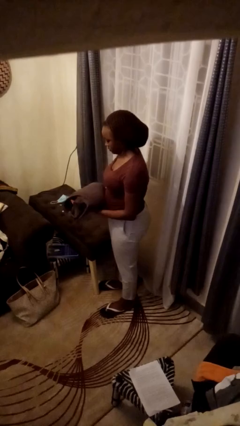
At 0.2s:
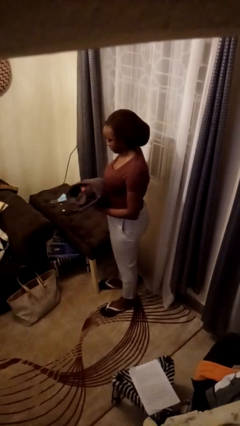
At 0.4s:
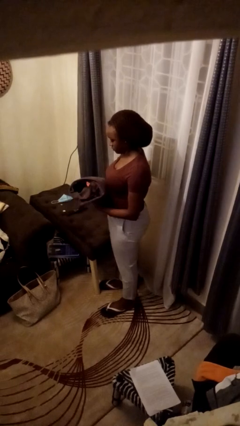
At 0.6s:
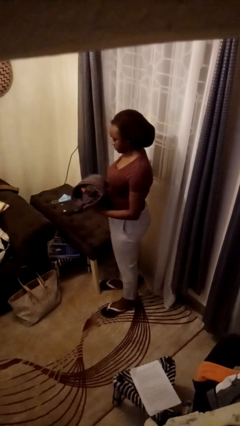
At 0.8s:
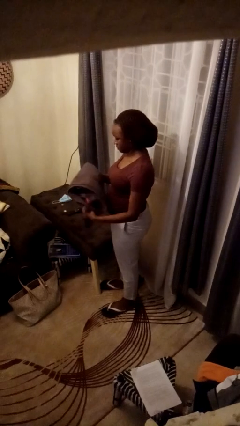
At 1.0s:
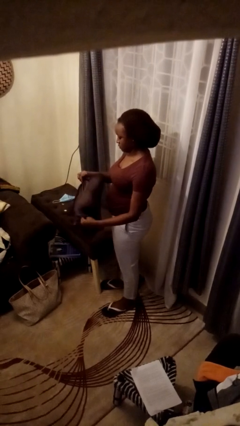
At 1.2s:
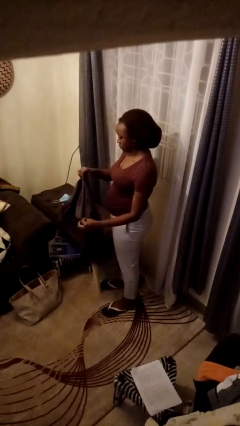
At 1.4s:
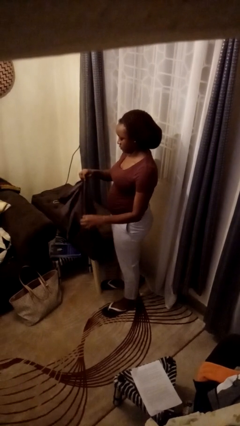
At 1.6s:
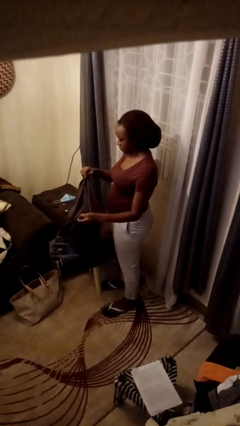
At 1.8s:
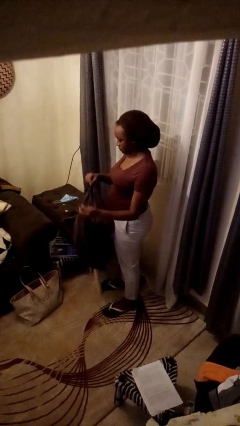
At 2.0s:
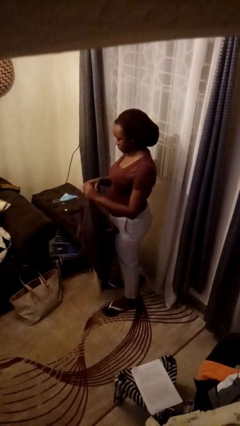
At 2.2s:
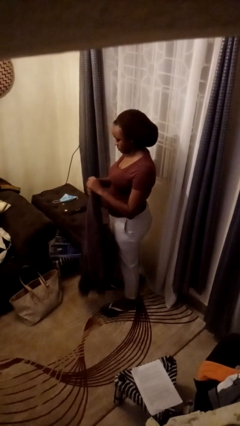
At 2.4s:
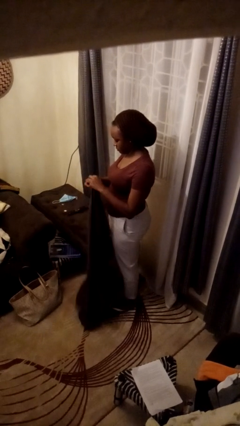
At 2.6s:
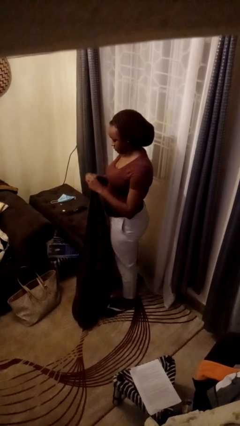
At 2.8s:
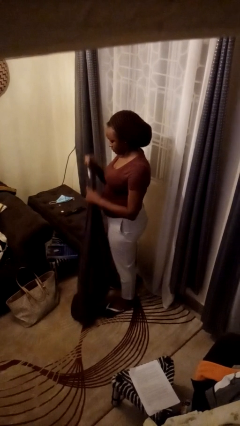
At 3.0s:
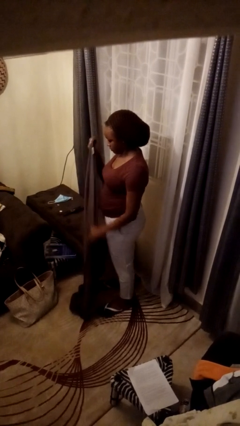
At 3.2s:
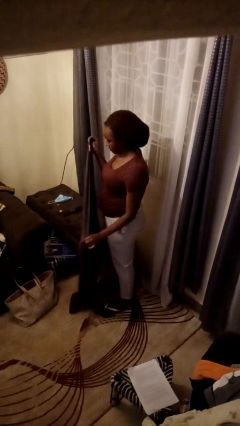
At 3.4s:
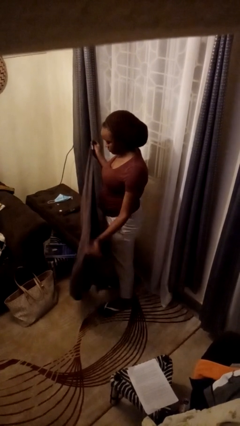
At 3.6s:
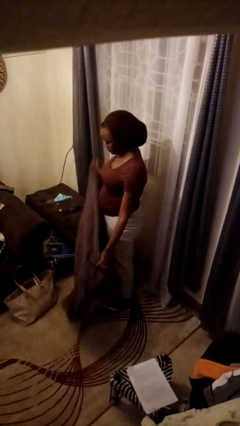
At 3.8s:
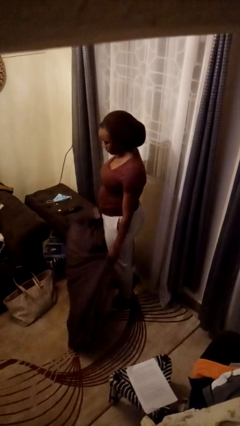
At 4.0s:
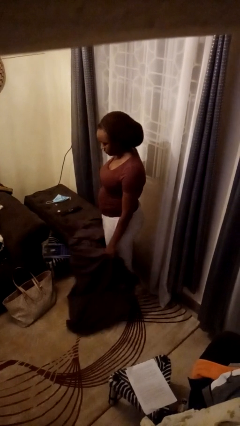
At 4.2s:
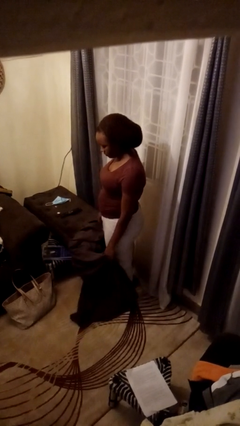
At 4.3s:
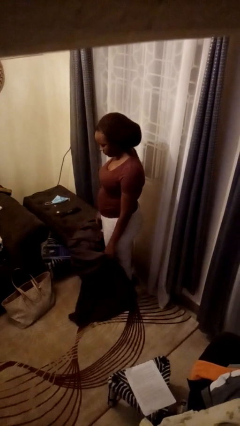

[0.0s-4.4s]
person unfolds blanket

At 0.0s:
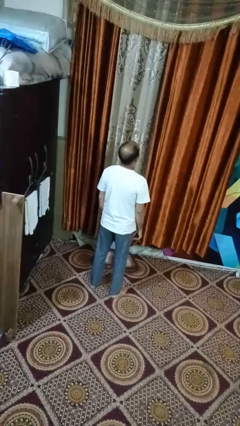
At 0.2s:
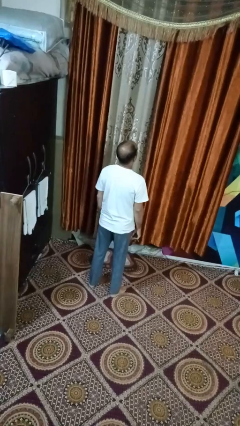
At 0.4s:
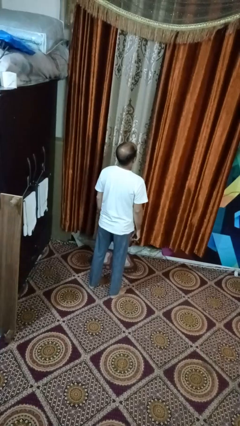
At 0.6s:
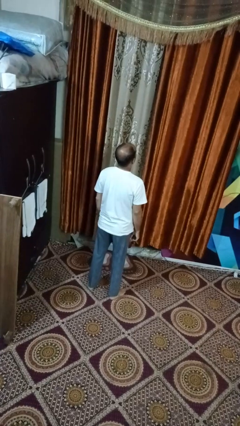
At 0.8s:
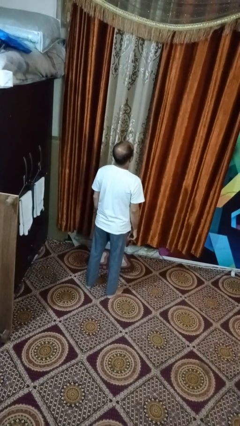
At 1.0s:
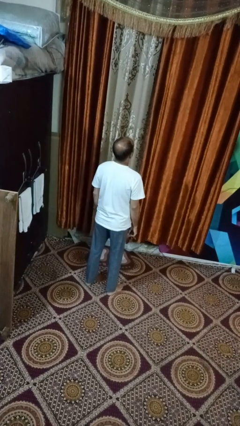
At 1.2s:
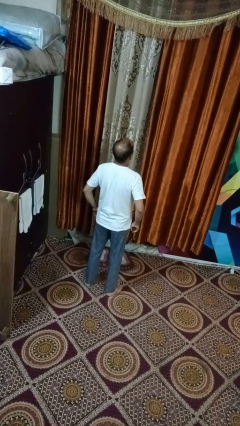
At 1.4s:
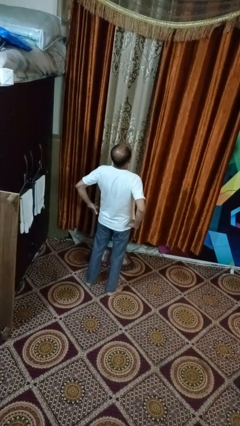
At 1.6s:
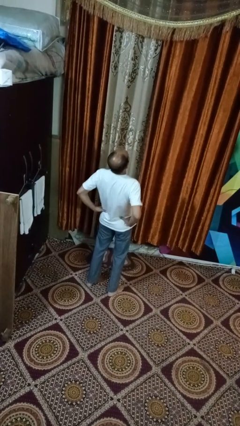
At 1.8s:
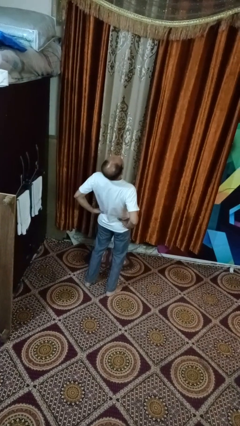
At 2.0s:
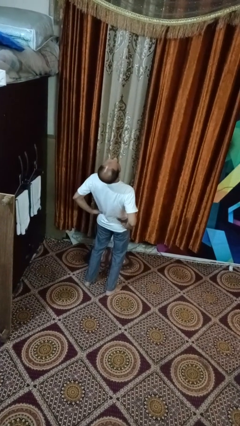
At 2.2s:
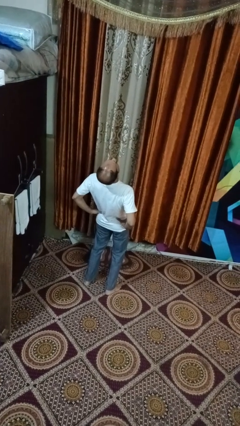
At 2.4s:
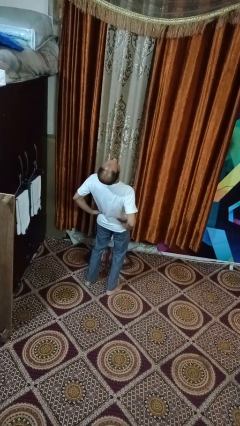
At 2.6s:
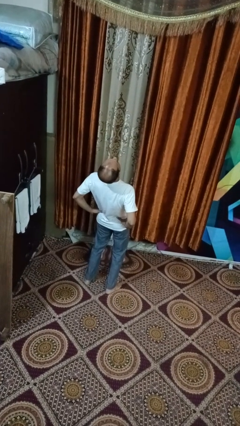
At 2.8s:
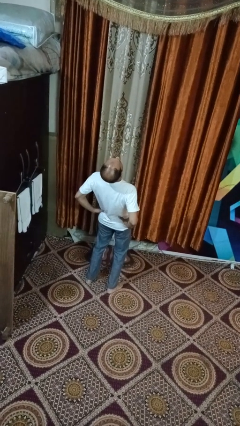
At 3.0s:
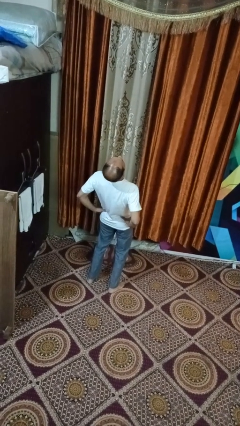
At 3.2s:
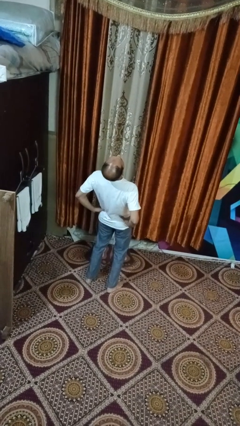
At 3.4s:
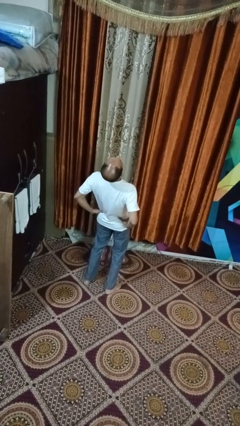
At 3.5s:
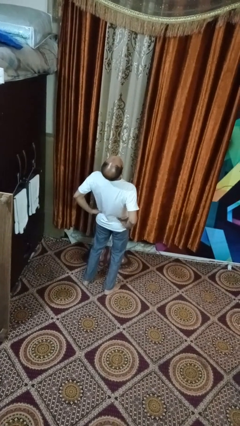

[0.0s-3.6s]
person stretches back

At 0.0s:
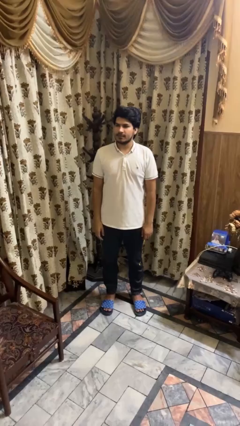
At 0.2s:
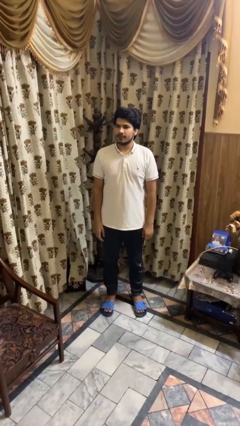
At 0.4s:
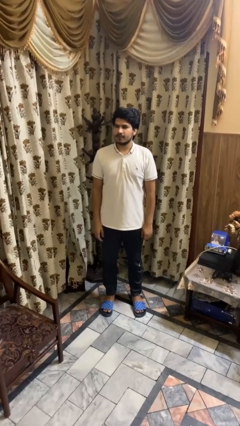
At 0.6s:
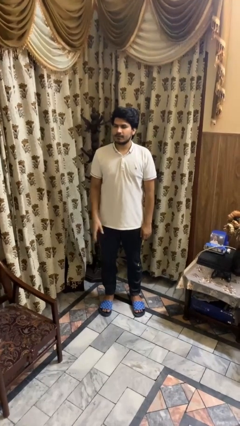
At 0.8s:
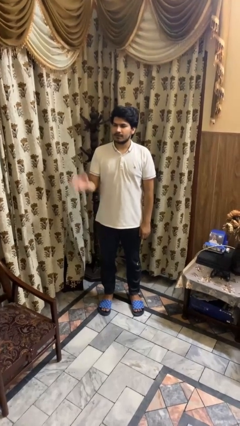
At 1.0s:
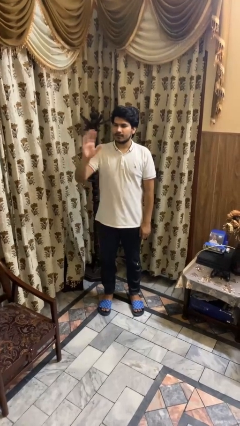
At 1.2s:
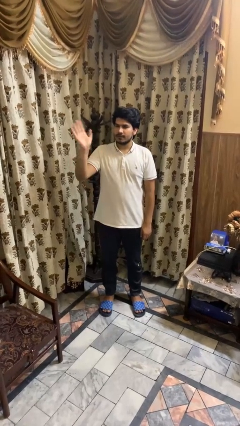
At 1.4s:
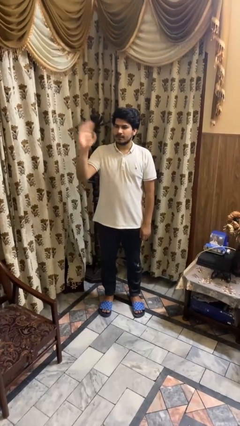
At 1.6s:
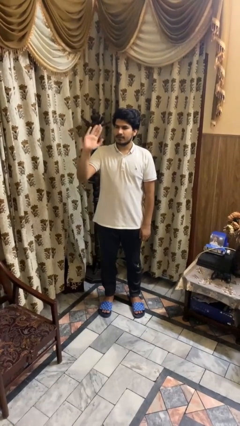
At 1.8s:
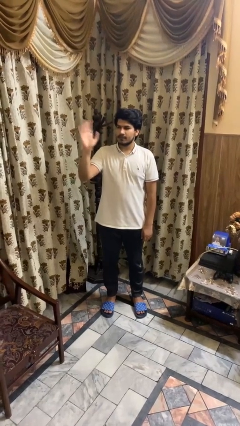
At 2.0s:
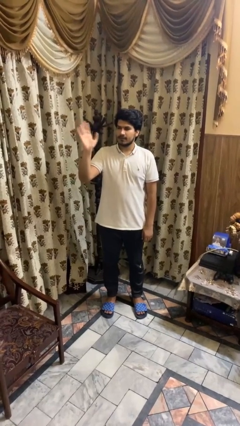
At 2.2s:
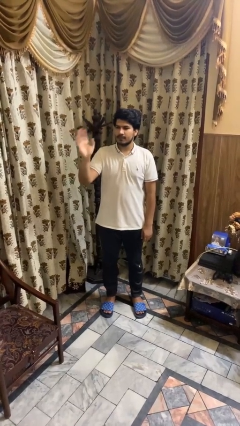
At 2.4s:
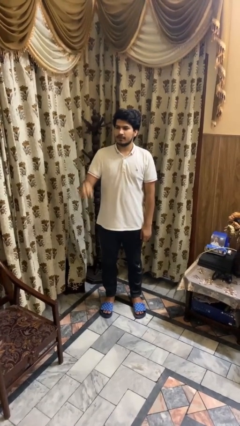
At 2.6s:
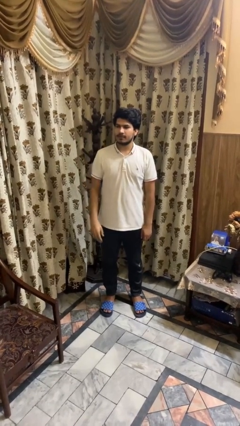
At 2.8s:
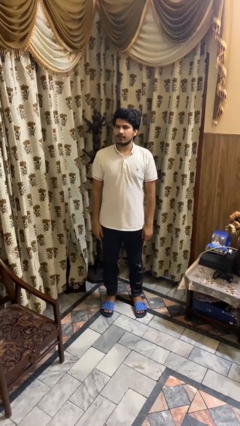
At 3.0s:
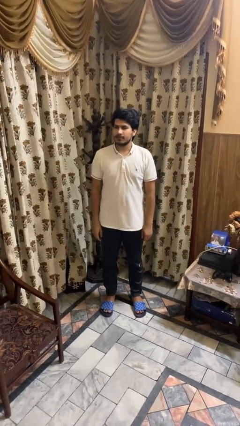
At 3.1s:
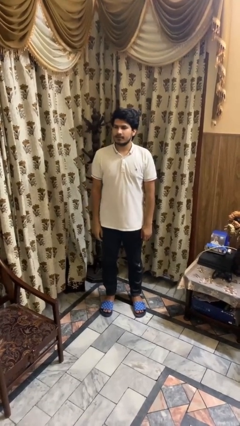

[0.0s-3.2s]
person waves at person

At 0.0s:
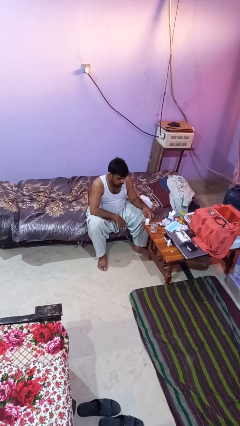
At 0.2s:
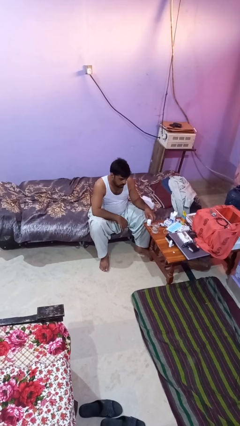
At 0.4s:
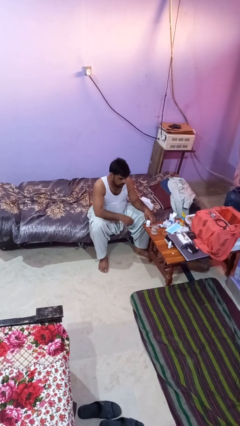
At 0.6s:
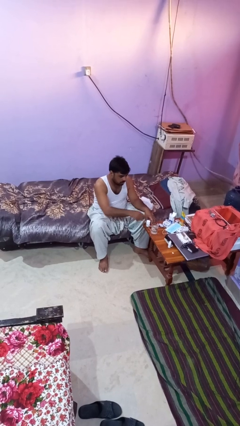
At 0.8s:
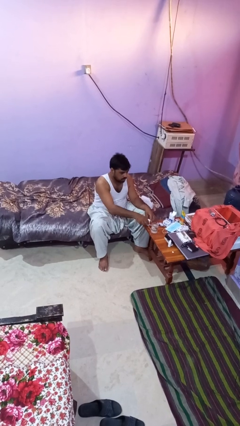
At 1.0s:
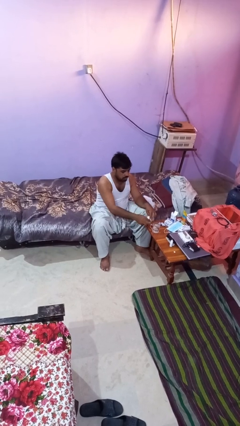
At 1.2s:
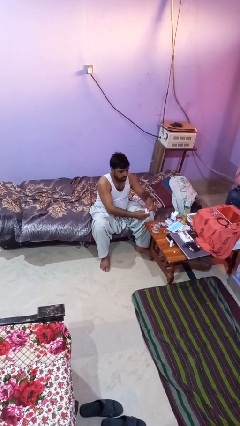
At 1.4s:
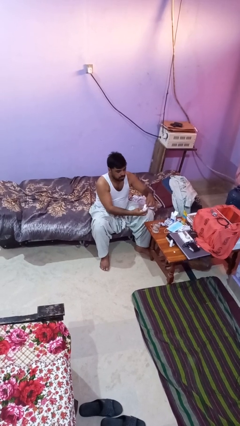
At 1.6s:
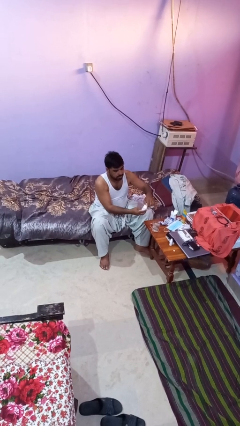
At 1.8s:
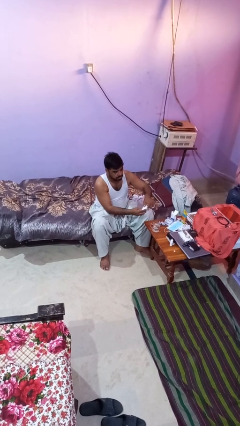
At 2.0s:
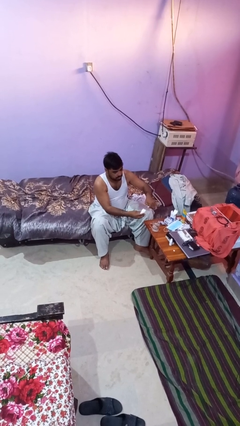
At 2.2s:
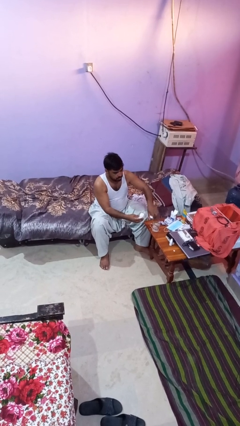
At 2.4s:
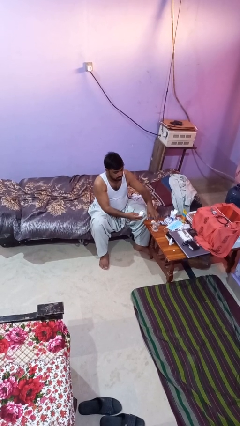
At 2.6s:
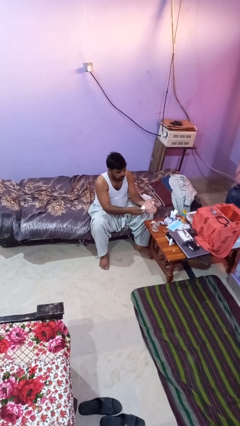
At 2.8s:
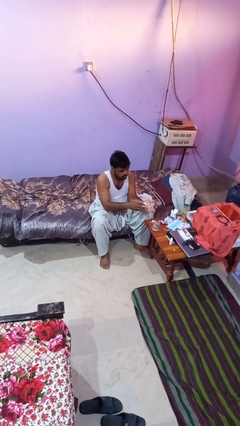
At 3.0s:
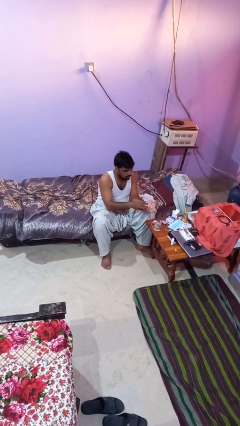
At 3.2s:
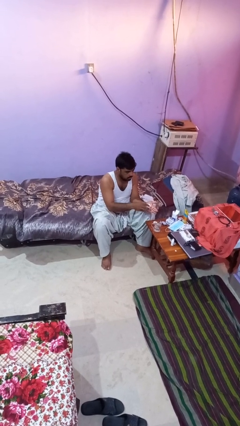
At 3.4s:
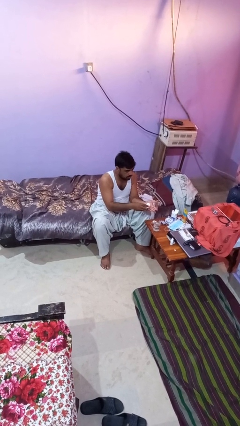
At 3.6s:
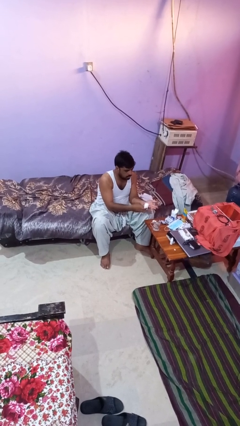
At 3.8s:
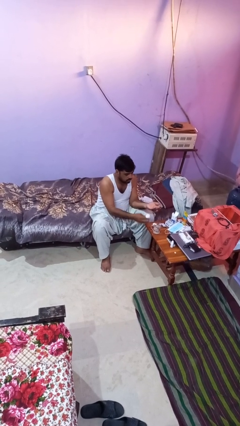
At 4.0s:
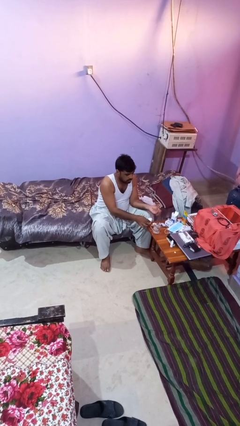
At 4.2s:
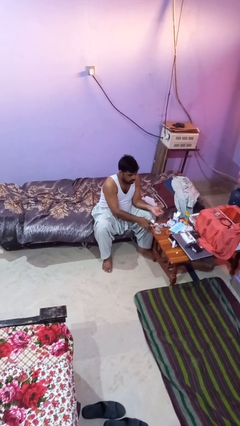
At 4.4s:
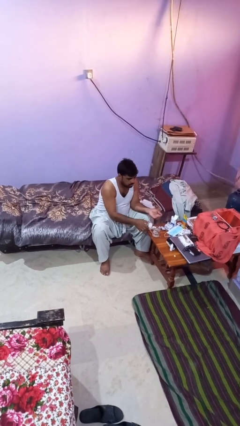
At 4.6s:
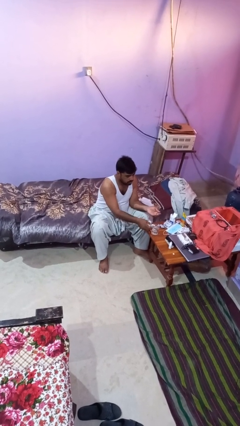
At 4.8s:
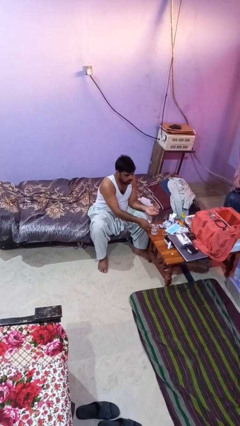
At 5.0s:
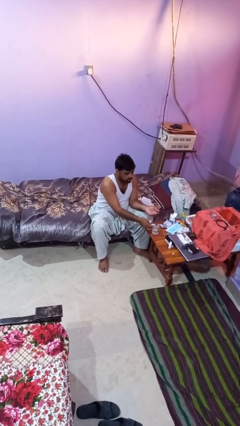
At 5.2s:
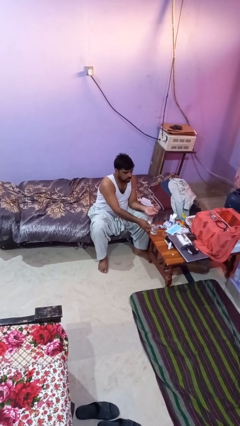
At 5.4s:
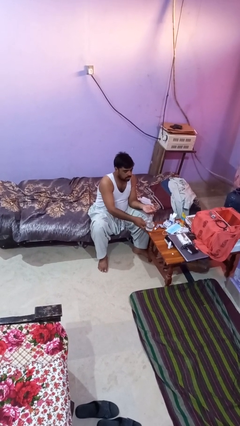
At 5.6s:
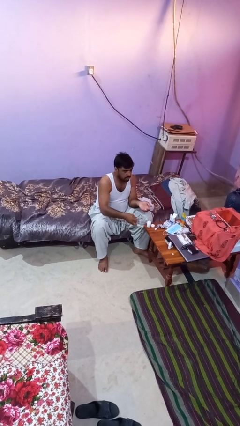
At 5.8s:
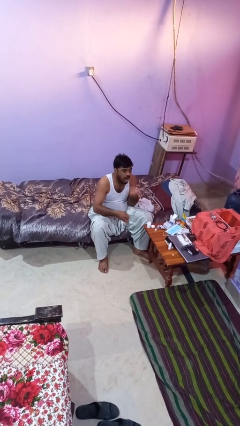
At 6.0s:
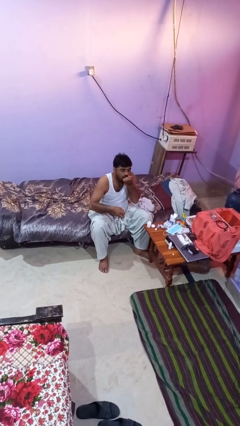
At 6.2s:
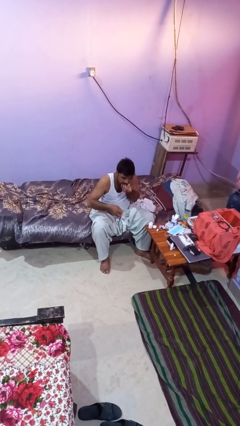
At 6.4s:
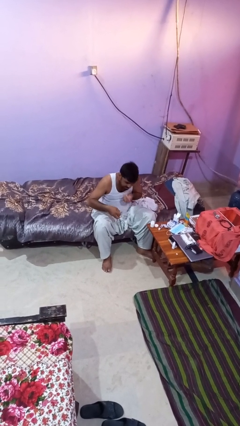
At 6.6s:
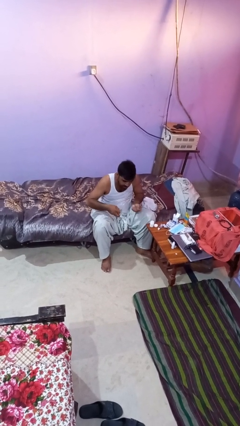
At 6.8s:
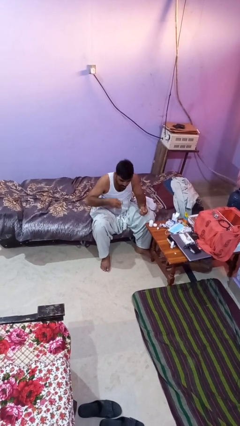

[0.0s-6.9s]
person takes medicine pills

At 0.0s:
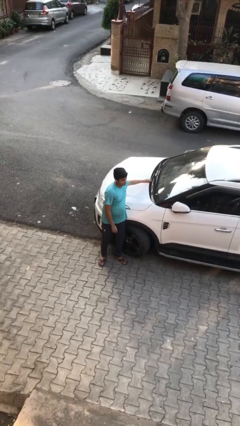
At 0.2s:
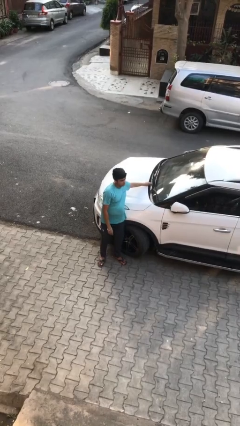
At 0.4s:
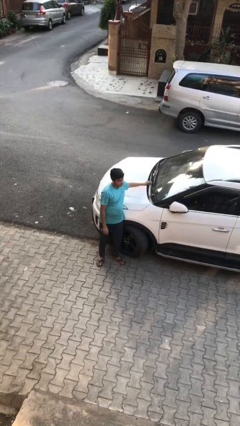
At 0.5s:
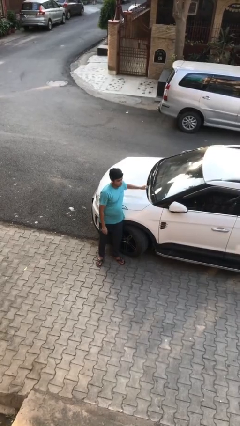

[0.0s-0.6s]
person flips down car wipers
